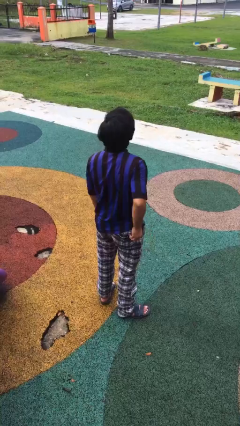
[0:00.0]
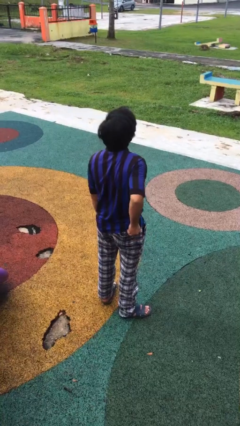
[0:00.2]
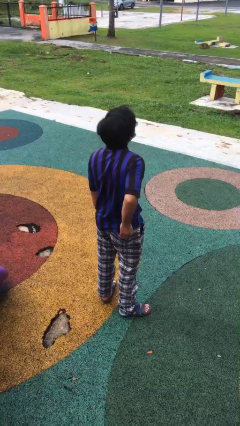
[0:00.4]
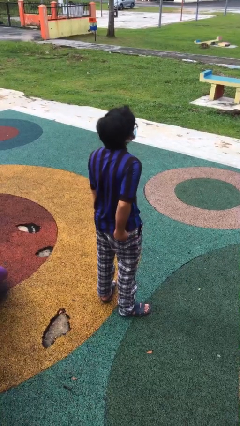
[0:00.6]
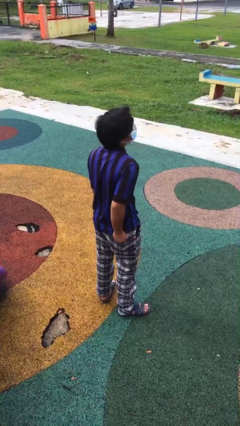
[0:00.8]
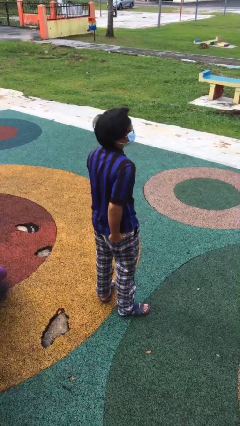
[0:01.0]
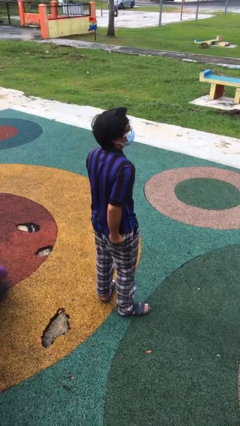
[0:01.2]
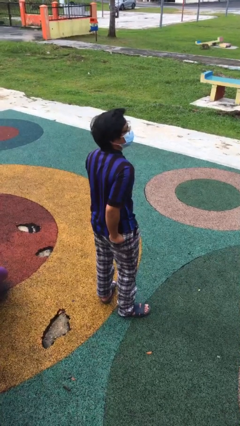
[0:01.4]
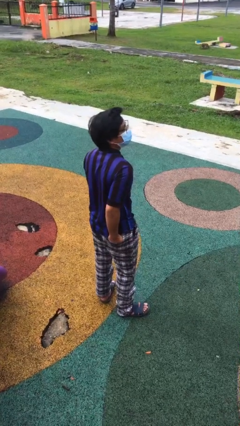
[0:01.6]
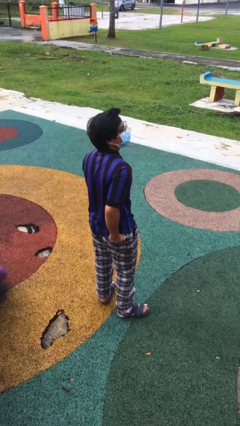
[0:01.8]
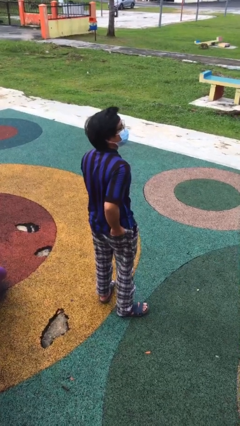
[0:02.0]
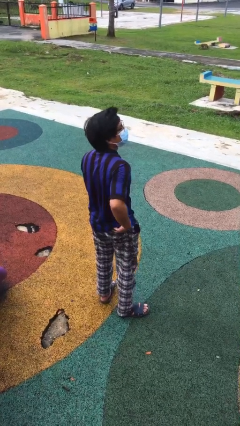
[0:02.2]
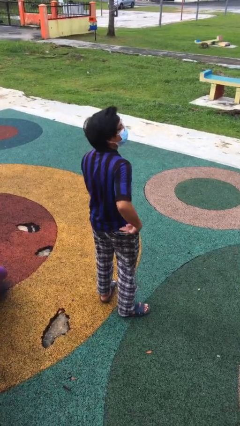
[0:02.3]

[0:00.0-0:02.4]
person puts hands in back pockets

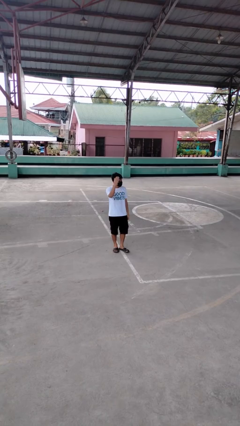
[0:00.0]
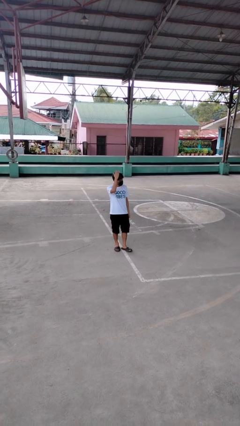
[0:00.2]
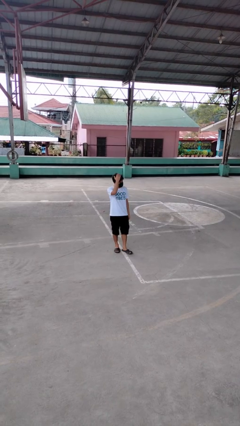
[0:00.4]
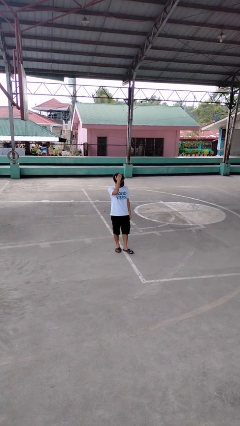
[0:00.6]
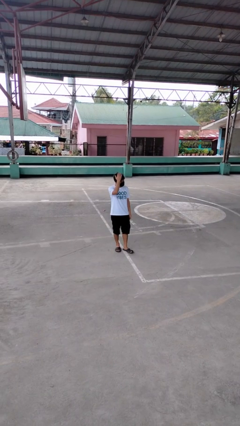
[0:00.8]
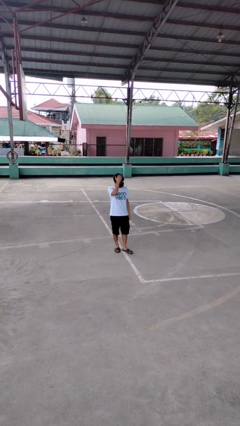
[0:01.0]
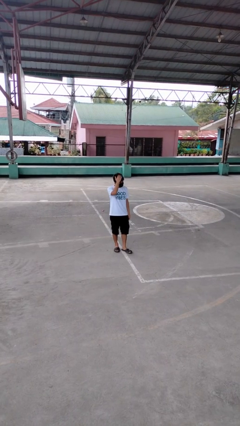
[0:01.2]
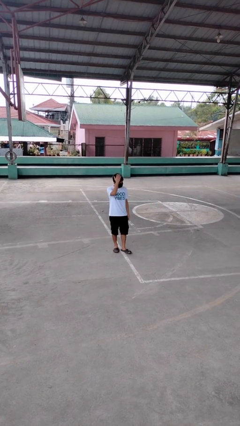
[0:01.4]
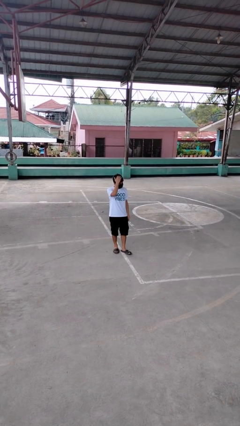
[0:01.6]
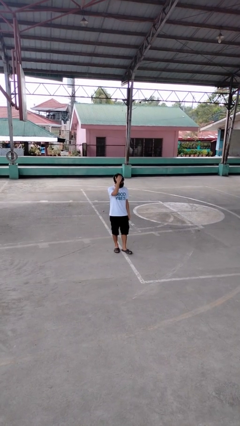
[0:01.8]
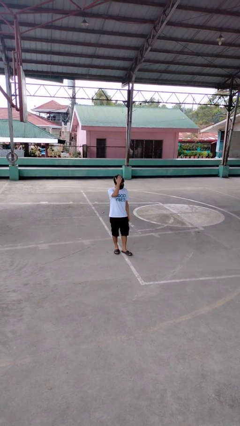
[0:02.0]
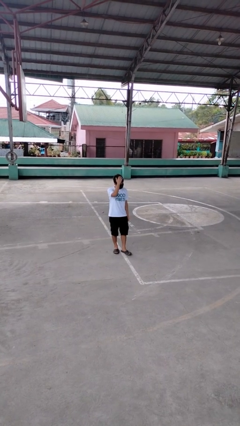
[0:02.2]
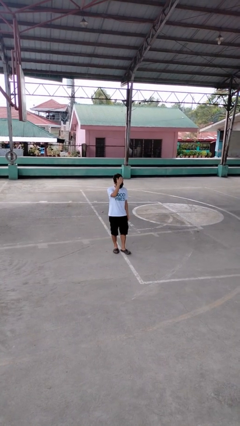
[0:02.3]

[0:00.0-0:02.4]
person pats head

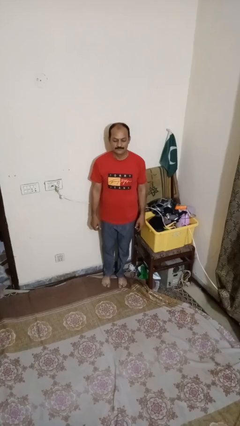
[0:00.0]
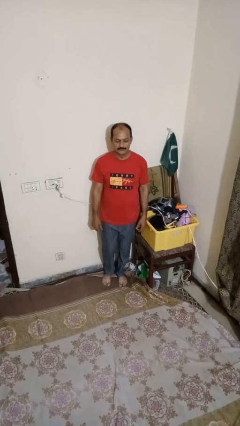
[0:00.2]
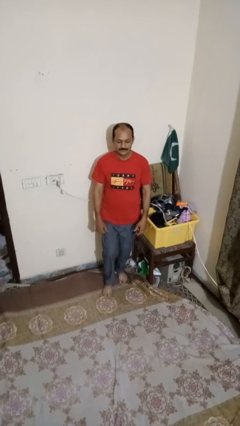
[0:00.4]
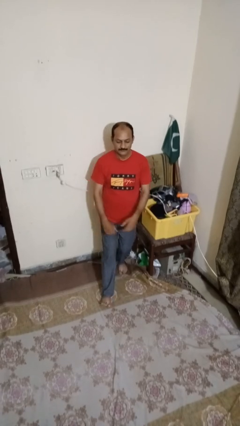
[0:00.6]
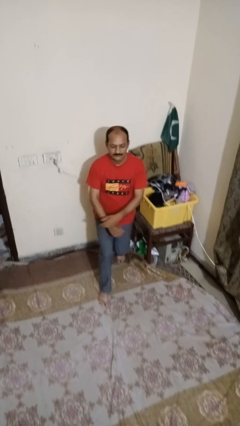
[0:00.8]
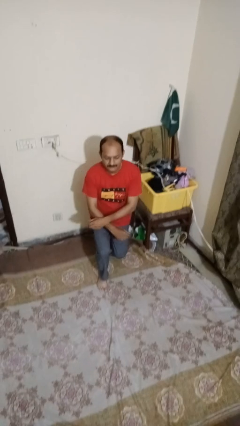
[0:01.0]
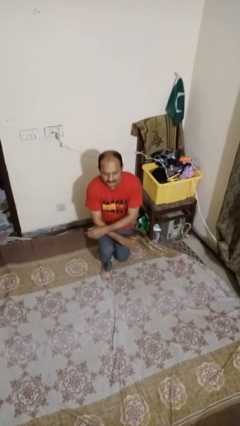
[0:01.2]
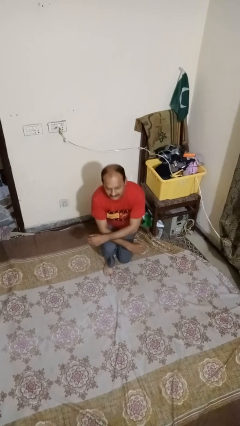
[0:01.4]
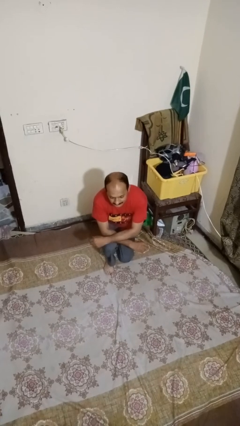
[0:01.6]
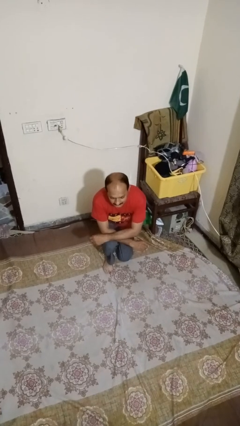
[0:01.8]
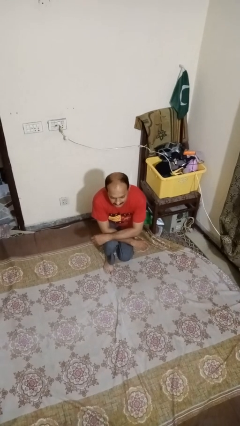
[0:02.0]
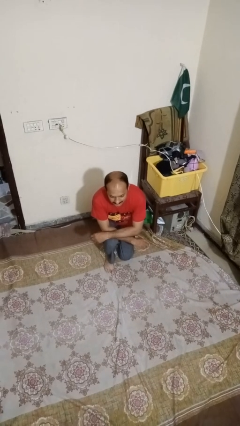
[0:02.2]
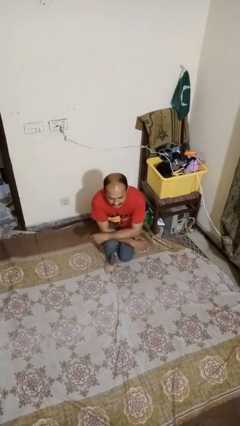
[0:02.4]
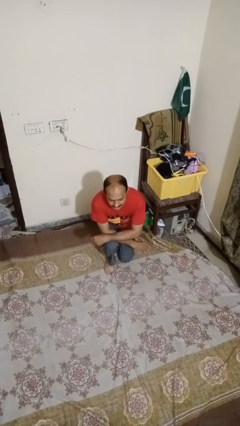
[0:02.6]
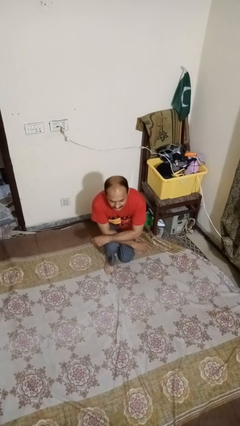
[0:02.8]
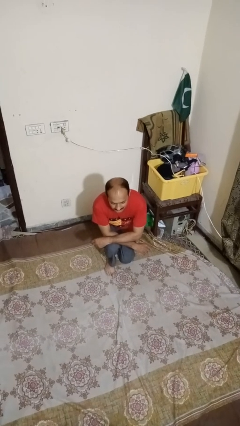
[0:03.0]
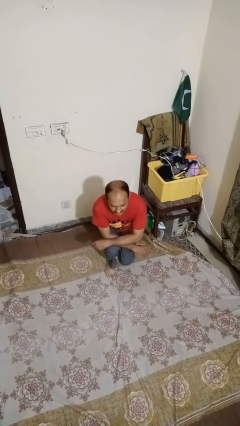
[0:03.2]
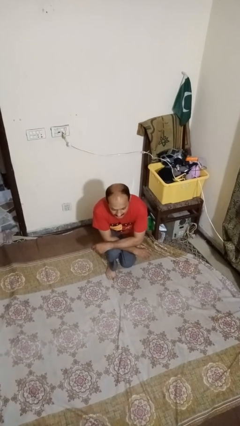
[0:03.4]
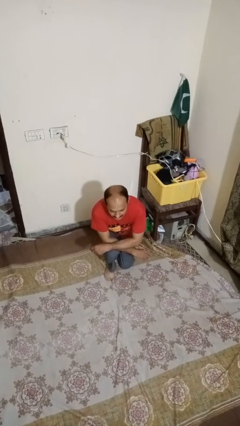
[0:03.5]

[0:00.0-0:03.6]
person exercises with lunges

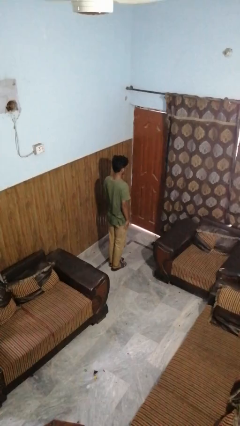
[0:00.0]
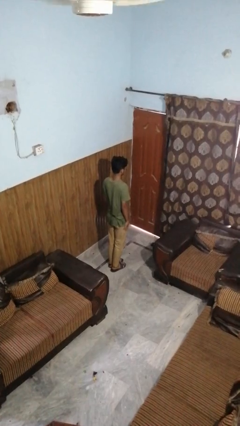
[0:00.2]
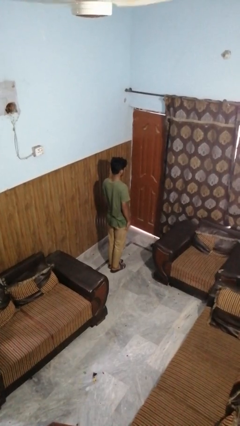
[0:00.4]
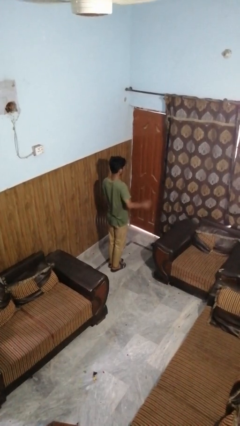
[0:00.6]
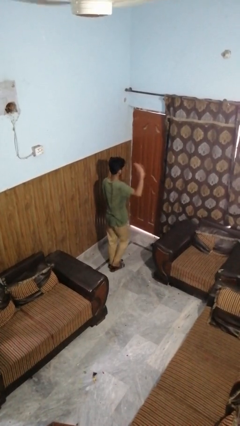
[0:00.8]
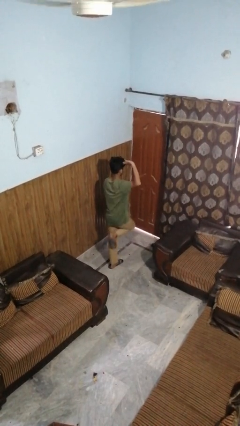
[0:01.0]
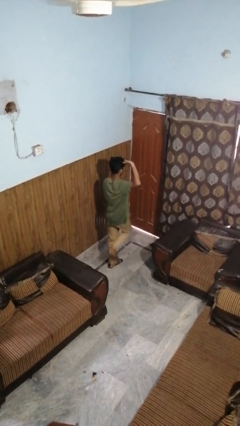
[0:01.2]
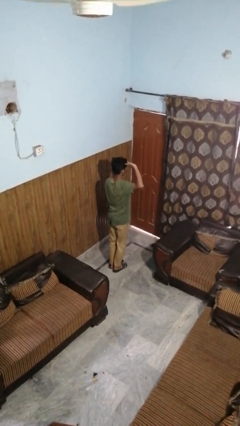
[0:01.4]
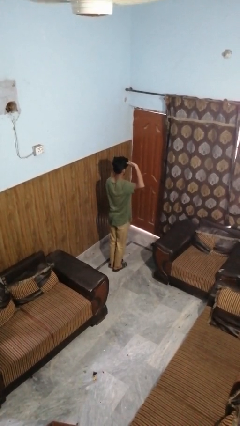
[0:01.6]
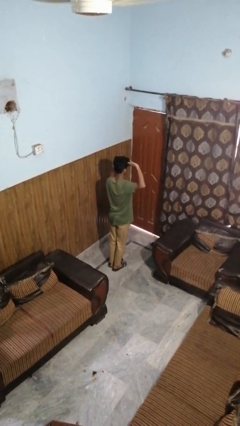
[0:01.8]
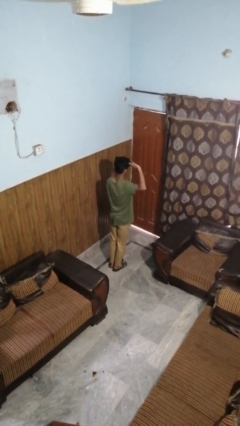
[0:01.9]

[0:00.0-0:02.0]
person salutes

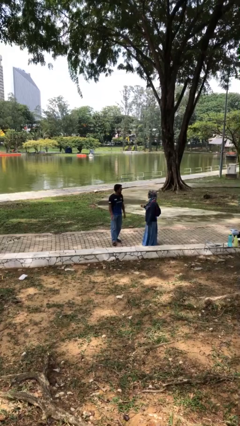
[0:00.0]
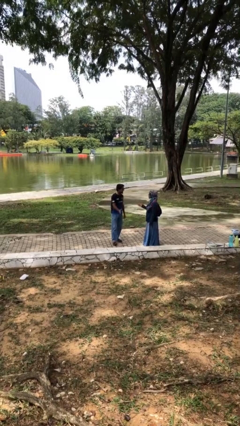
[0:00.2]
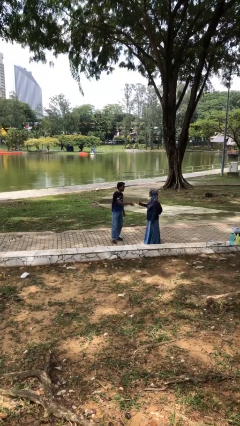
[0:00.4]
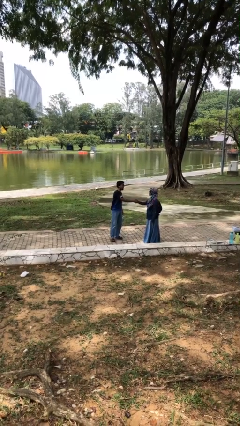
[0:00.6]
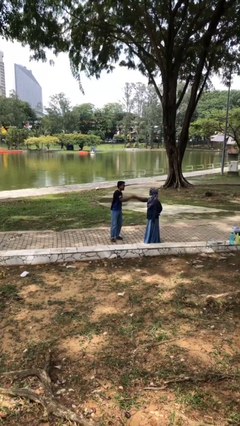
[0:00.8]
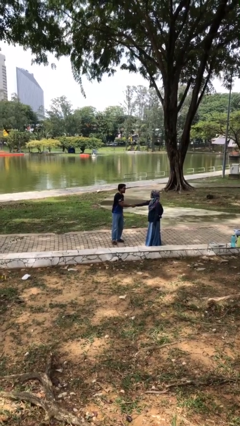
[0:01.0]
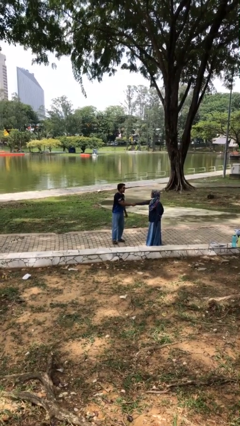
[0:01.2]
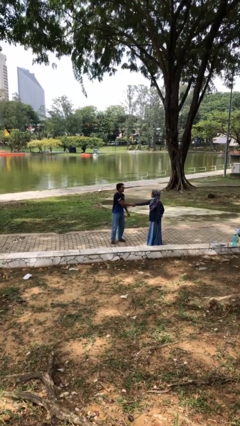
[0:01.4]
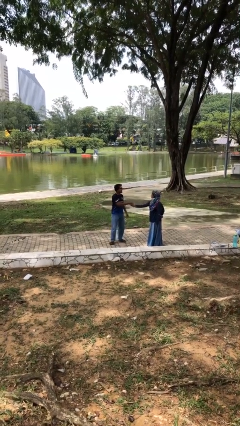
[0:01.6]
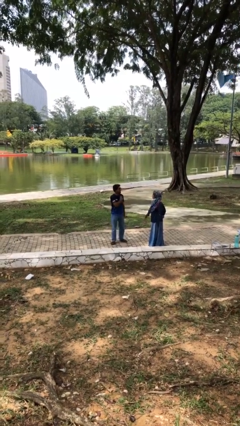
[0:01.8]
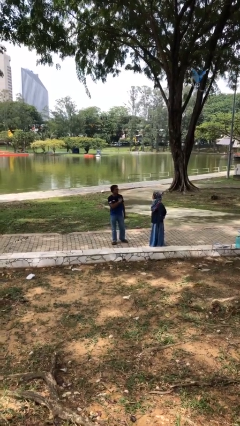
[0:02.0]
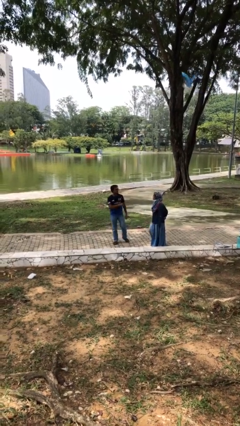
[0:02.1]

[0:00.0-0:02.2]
person shakes hand

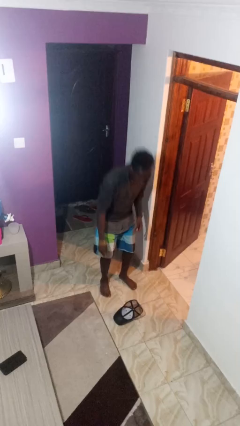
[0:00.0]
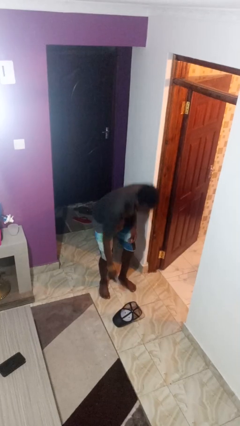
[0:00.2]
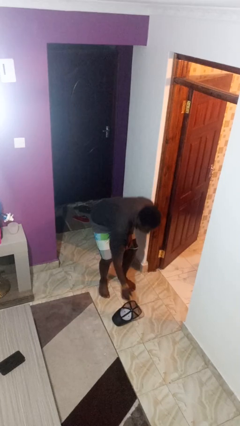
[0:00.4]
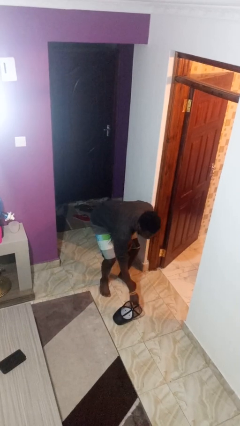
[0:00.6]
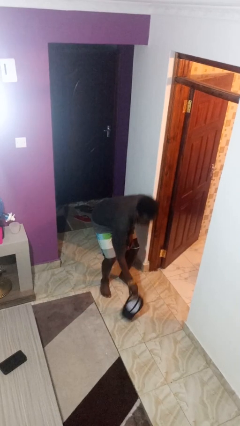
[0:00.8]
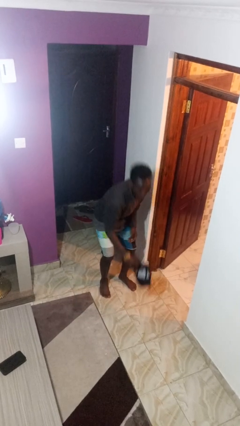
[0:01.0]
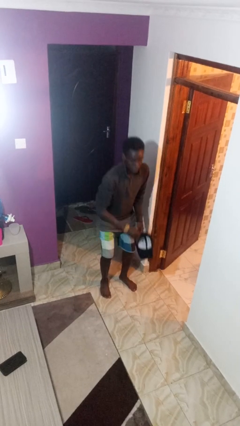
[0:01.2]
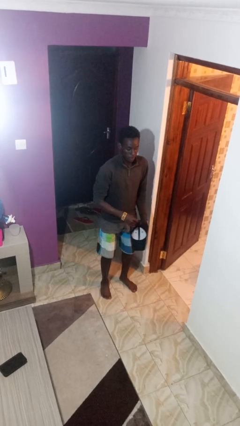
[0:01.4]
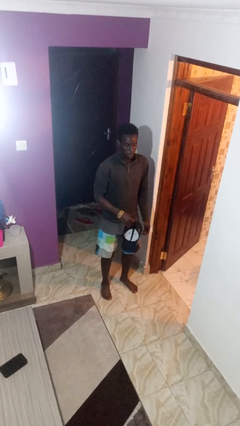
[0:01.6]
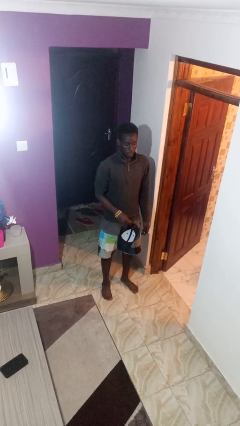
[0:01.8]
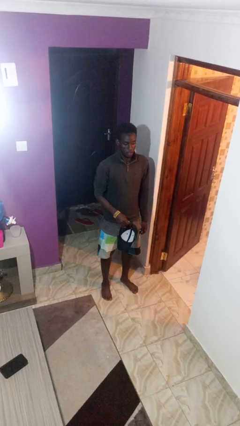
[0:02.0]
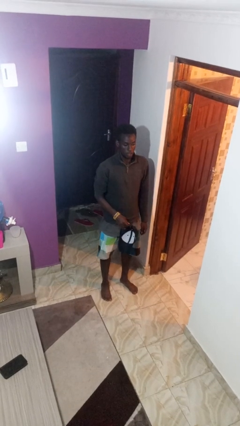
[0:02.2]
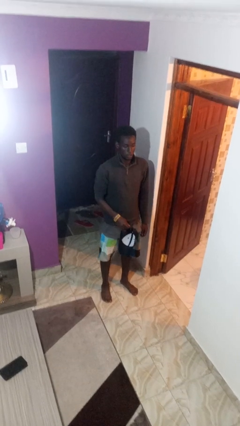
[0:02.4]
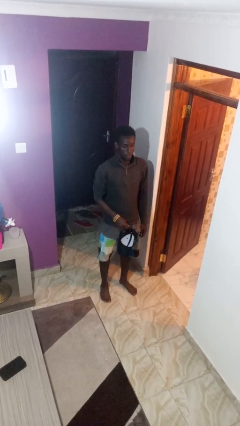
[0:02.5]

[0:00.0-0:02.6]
person picks up object from floor

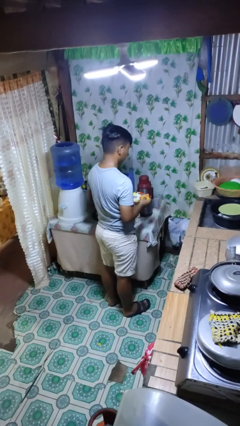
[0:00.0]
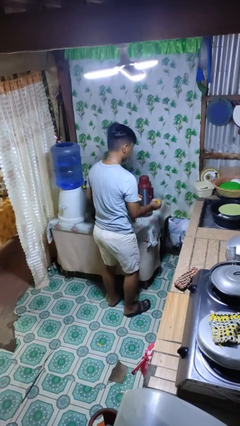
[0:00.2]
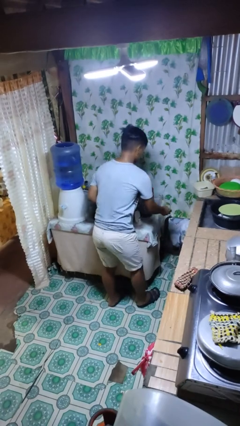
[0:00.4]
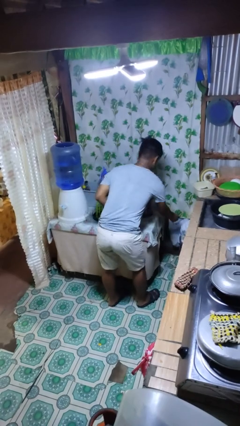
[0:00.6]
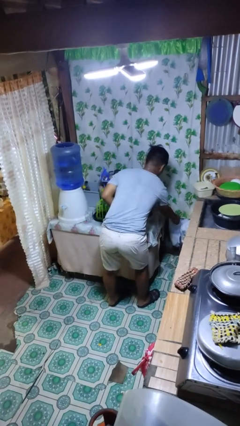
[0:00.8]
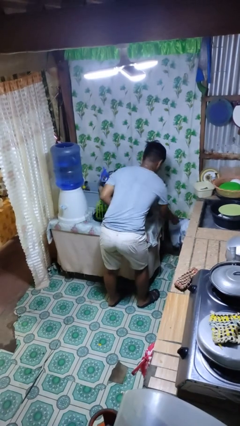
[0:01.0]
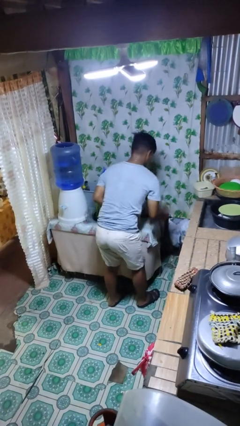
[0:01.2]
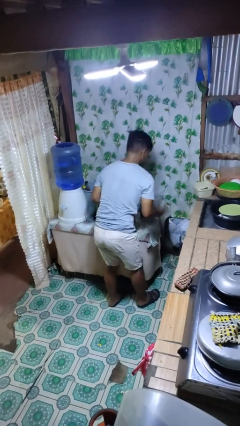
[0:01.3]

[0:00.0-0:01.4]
person discards trash

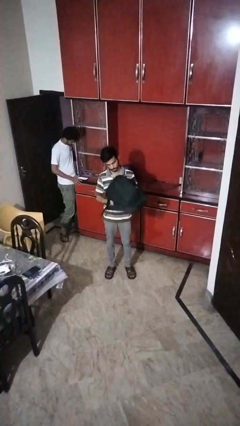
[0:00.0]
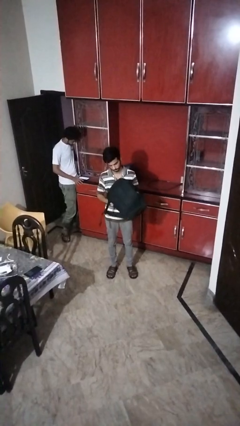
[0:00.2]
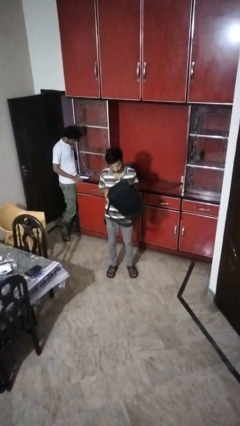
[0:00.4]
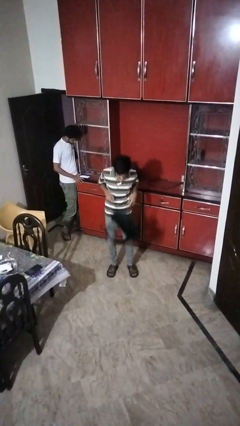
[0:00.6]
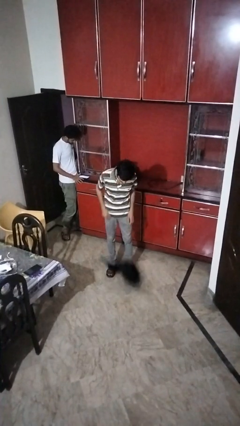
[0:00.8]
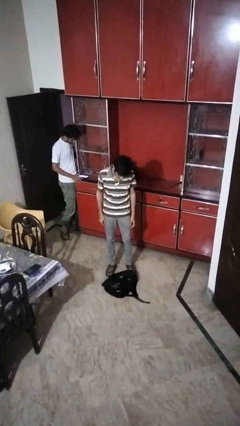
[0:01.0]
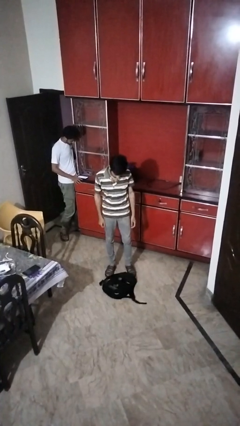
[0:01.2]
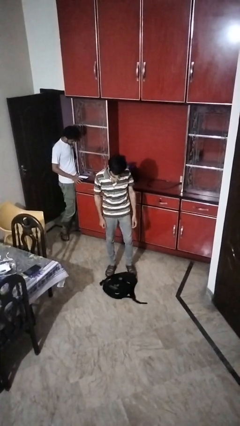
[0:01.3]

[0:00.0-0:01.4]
person drops object